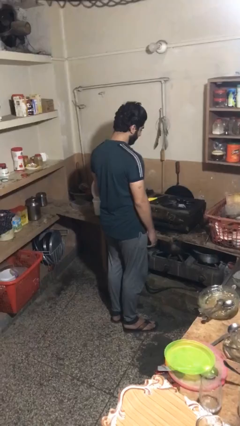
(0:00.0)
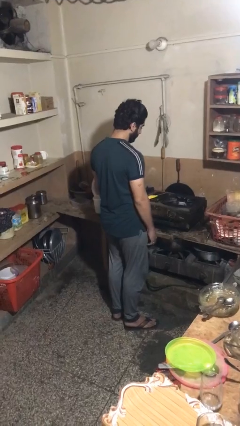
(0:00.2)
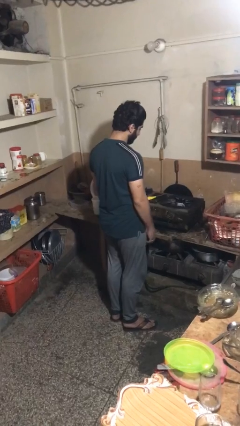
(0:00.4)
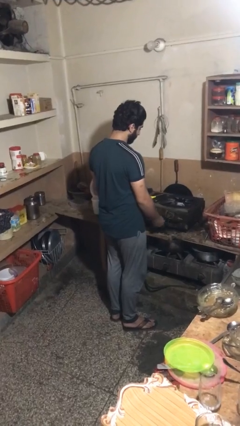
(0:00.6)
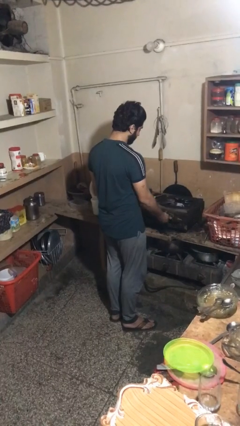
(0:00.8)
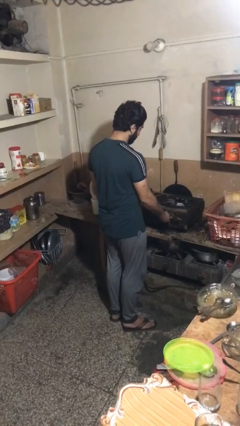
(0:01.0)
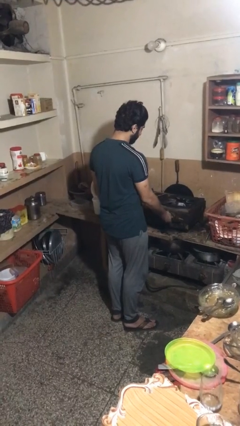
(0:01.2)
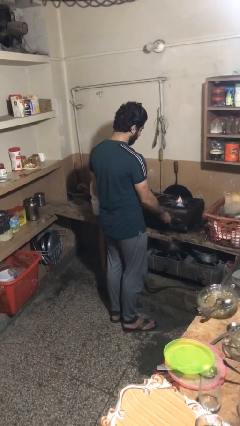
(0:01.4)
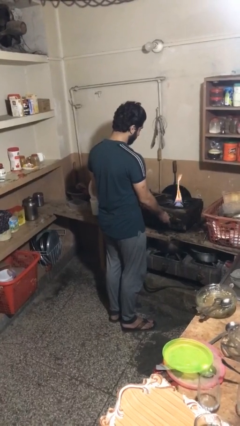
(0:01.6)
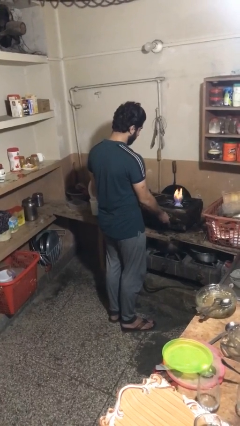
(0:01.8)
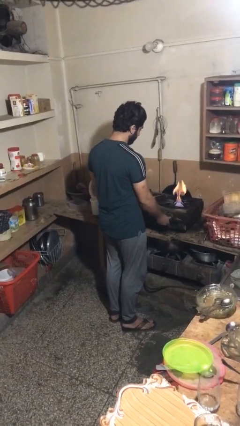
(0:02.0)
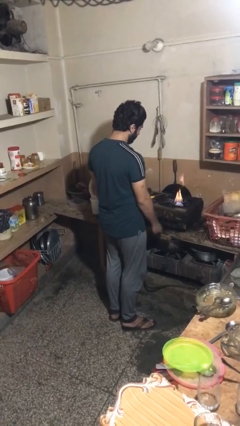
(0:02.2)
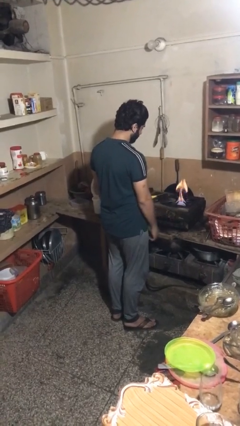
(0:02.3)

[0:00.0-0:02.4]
person turns on stovetop

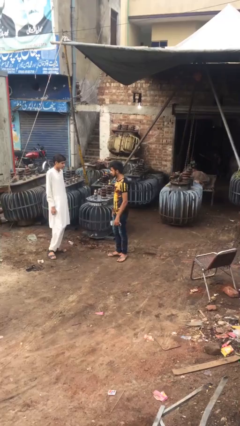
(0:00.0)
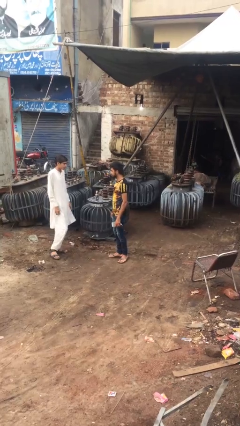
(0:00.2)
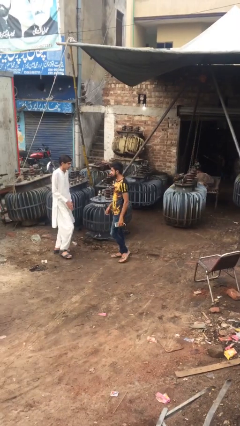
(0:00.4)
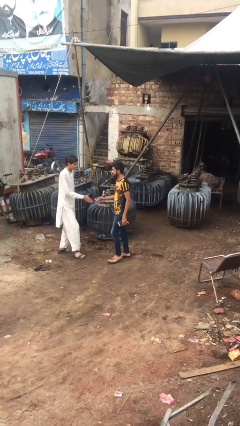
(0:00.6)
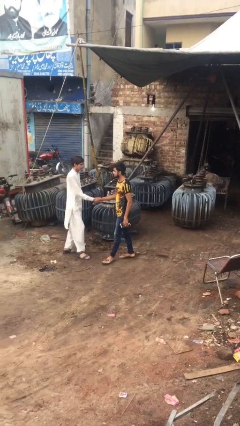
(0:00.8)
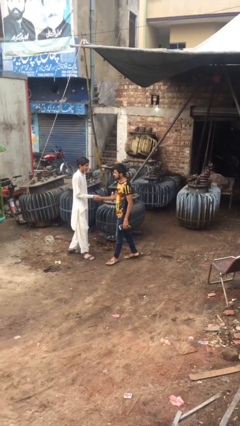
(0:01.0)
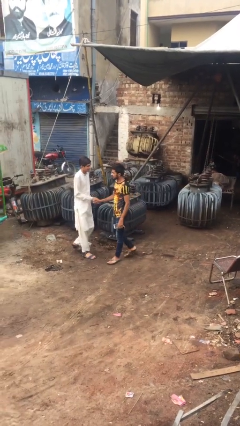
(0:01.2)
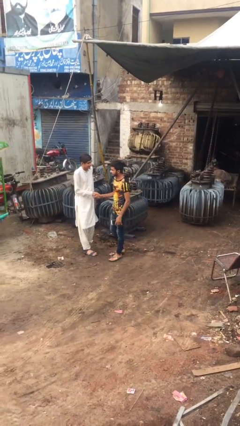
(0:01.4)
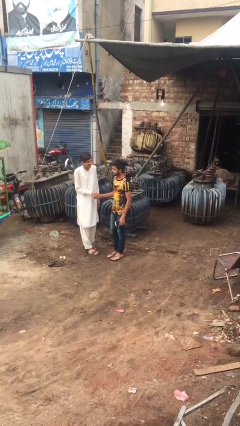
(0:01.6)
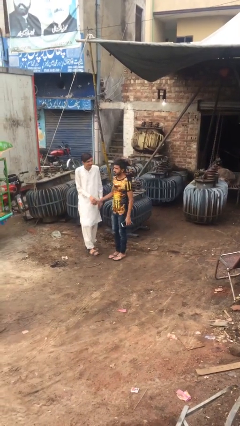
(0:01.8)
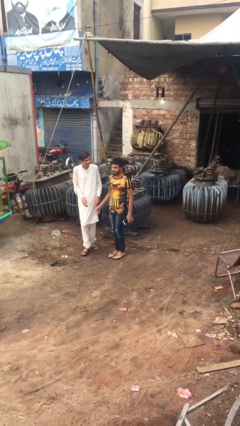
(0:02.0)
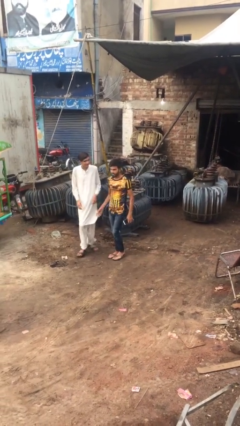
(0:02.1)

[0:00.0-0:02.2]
person shakes hand

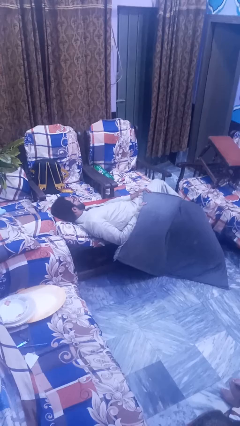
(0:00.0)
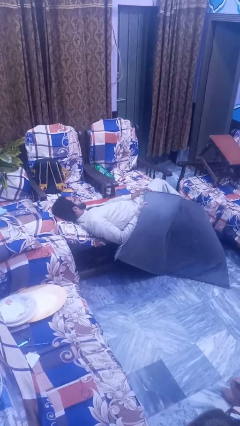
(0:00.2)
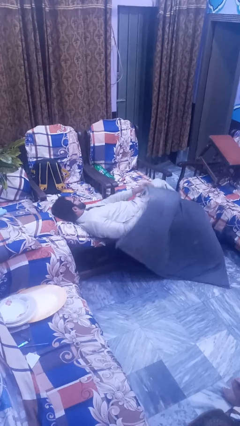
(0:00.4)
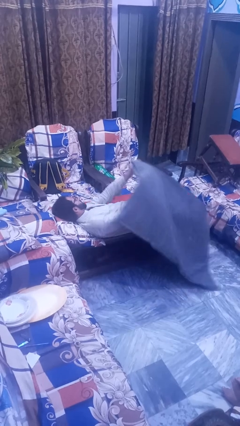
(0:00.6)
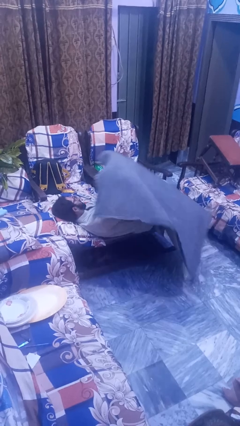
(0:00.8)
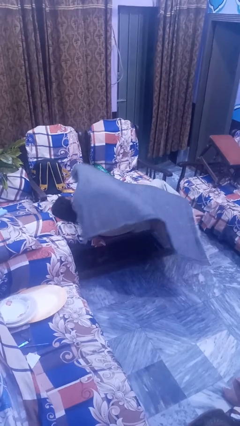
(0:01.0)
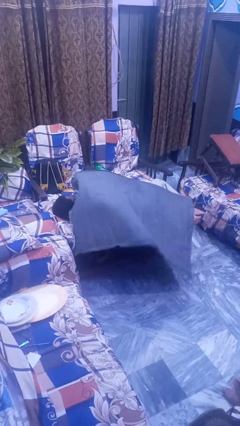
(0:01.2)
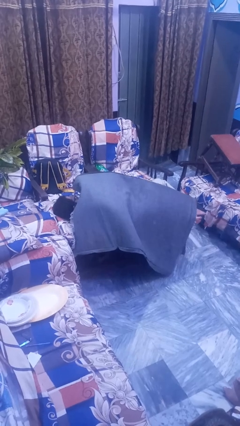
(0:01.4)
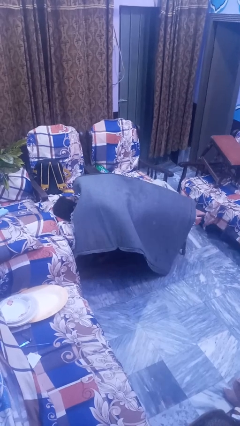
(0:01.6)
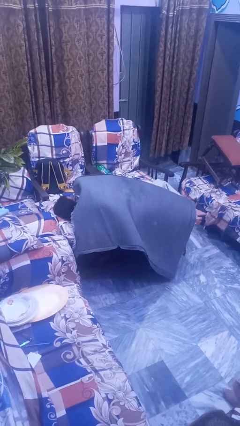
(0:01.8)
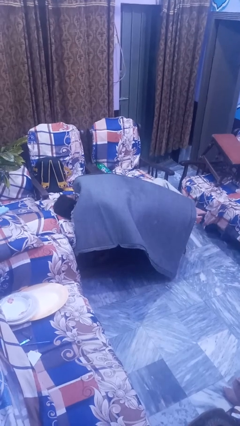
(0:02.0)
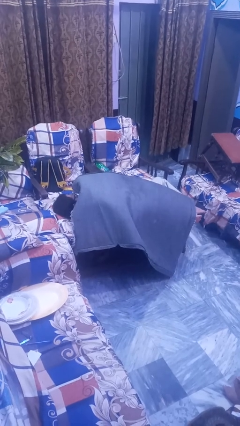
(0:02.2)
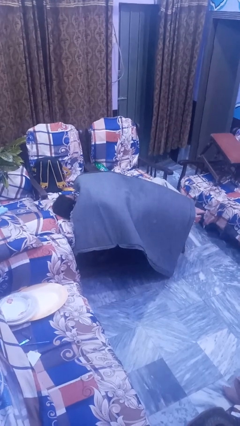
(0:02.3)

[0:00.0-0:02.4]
person covers with blanket

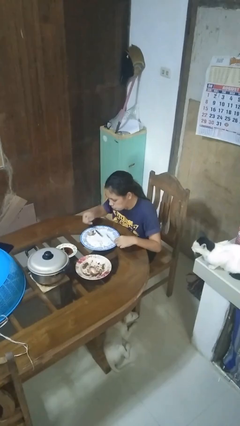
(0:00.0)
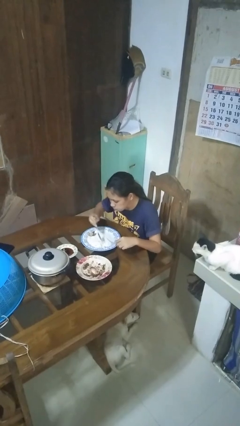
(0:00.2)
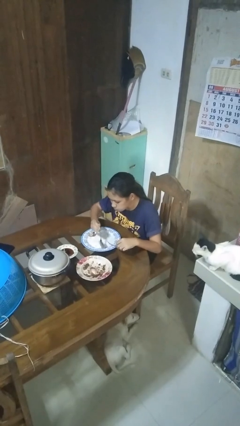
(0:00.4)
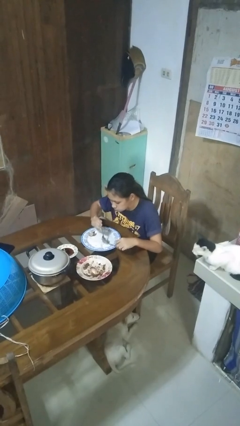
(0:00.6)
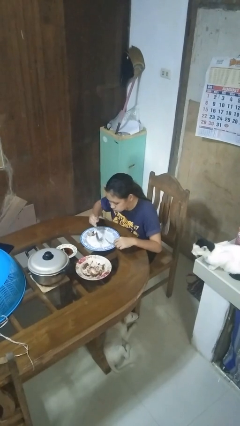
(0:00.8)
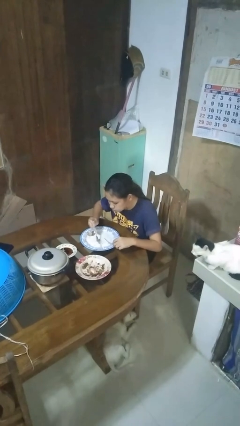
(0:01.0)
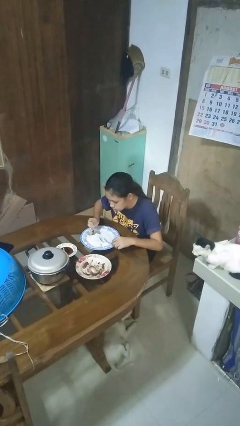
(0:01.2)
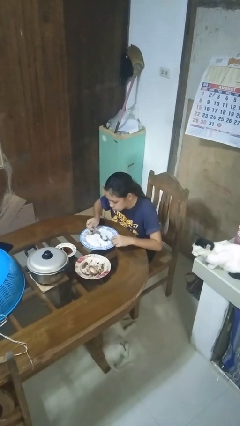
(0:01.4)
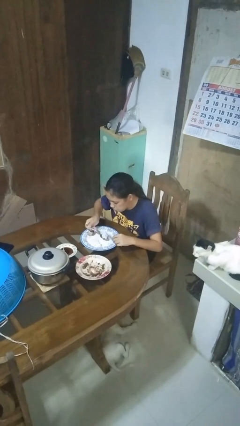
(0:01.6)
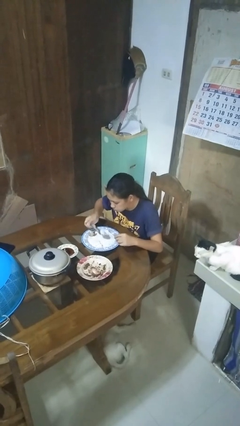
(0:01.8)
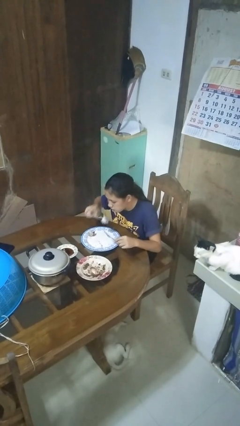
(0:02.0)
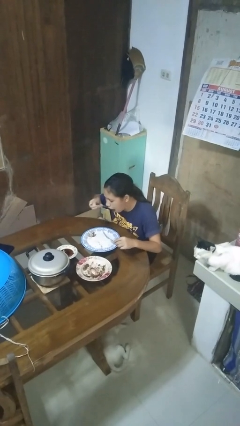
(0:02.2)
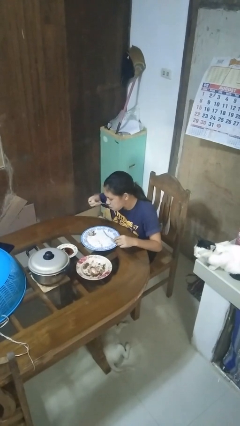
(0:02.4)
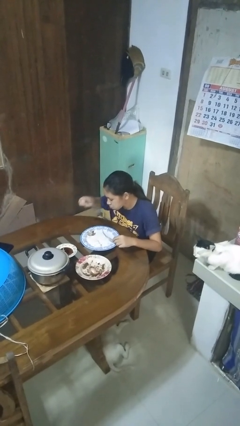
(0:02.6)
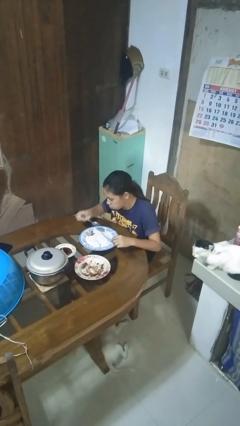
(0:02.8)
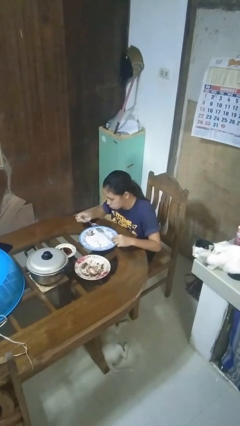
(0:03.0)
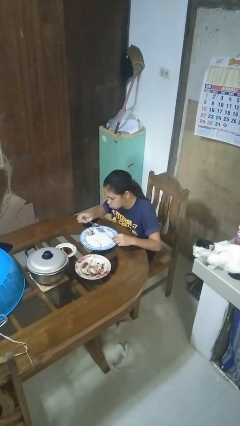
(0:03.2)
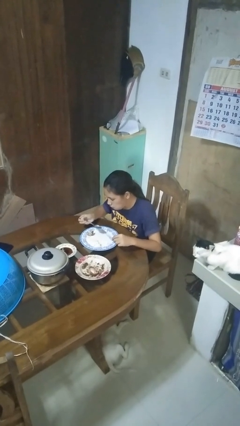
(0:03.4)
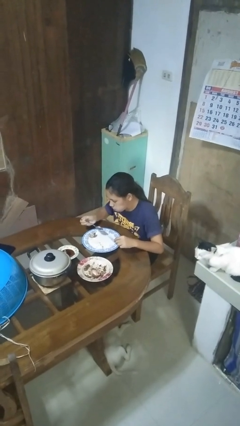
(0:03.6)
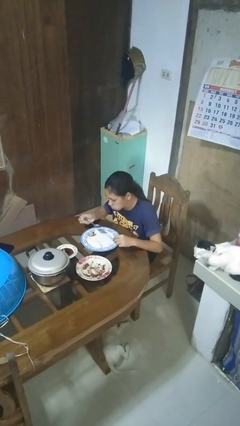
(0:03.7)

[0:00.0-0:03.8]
person eats with utensil

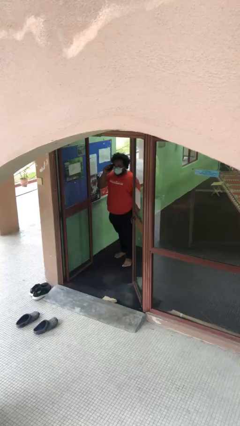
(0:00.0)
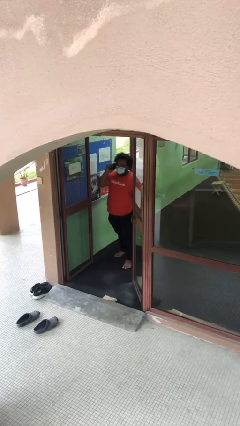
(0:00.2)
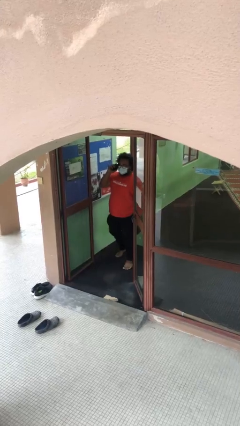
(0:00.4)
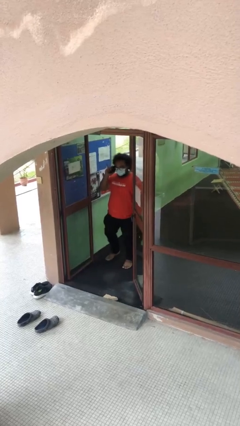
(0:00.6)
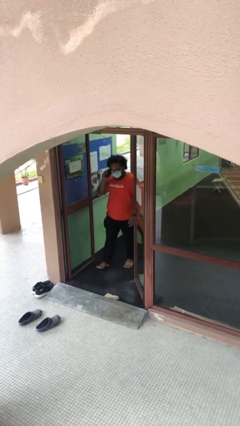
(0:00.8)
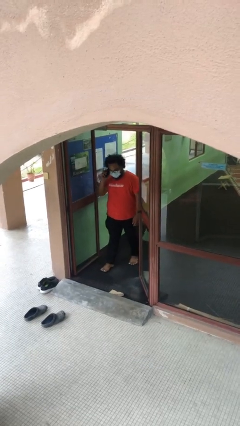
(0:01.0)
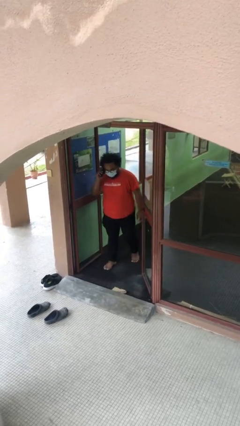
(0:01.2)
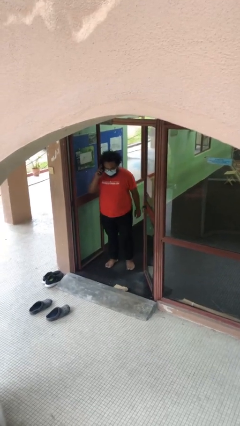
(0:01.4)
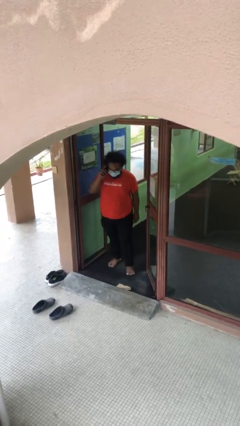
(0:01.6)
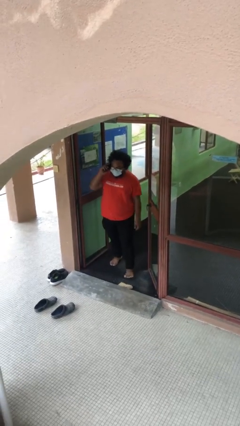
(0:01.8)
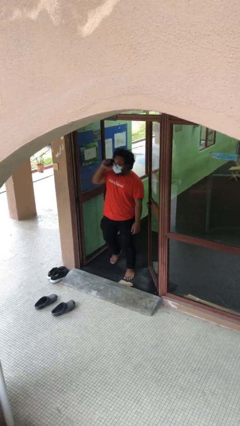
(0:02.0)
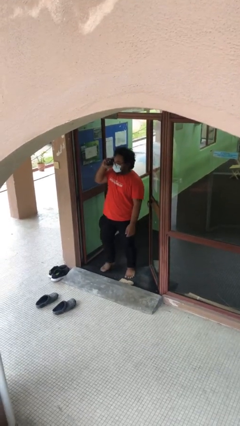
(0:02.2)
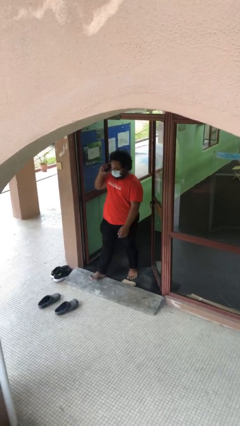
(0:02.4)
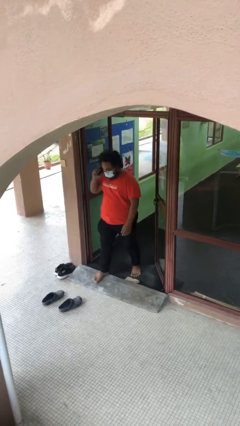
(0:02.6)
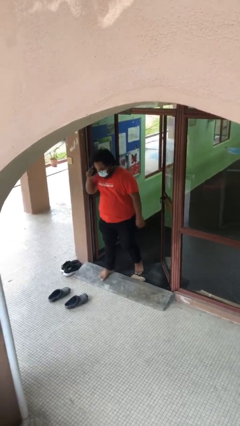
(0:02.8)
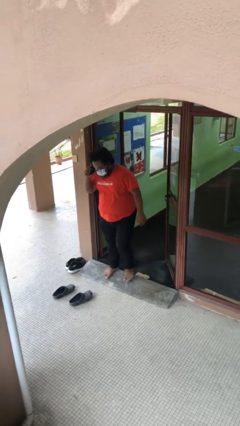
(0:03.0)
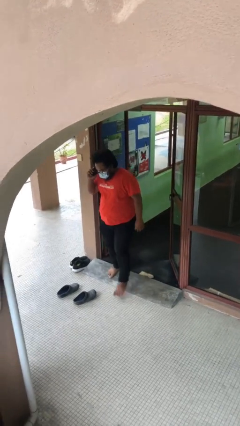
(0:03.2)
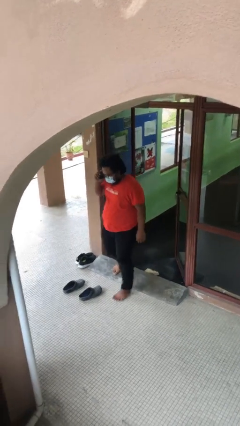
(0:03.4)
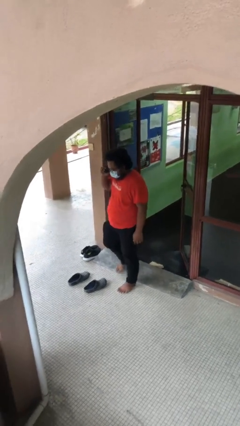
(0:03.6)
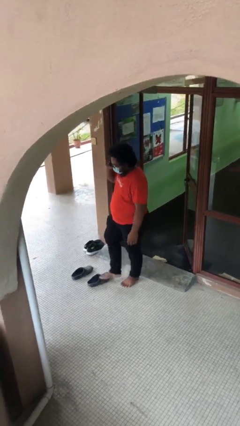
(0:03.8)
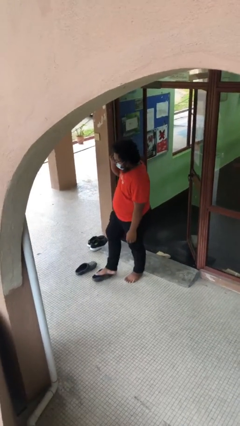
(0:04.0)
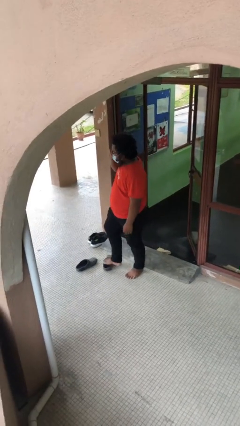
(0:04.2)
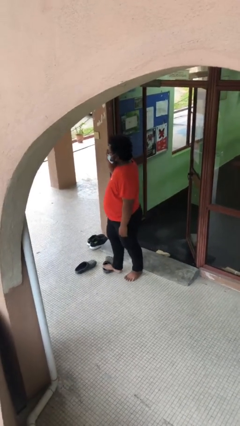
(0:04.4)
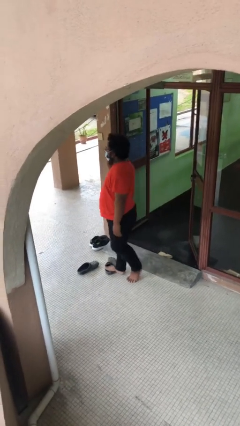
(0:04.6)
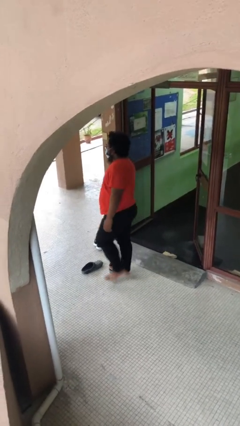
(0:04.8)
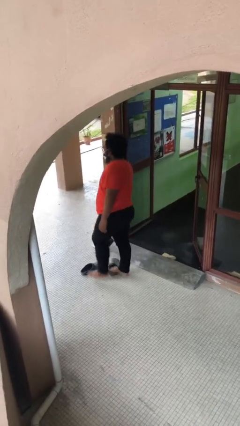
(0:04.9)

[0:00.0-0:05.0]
person enters scene through structure

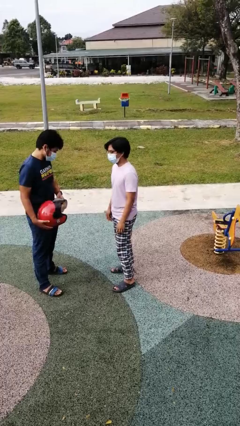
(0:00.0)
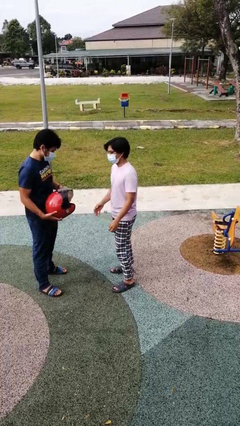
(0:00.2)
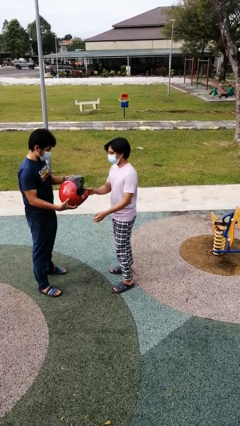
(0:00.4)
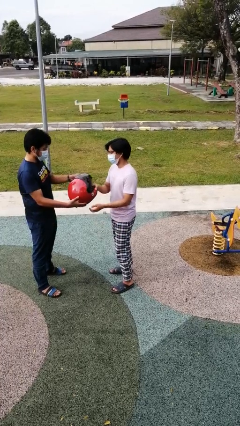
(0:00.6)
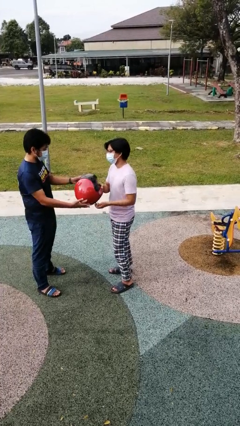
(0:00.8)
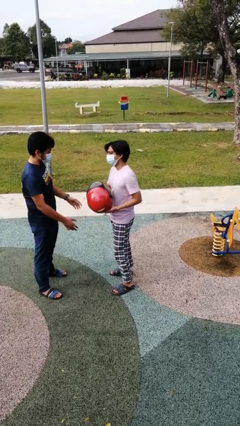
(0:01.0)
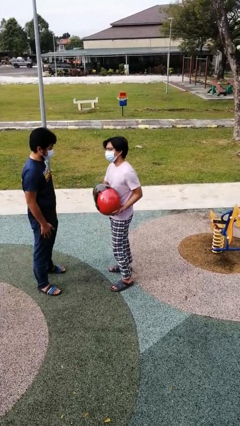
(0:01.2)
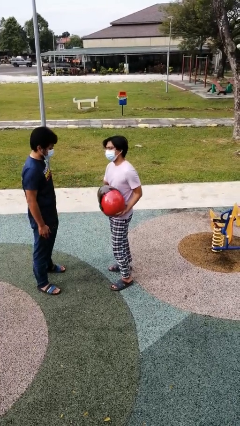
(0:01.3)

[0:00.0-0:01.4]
person transfers object to person
